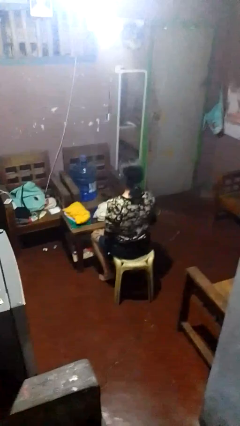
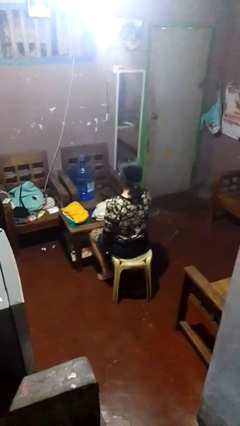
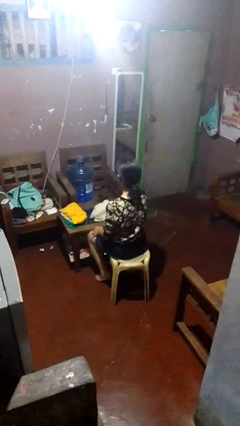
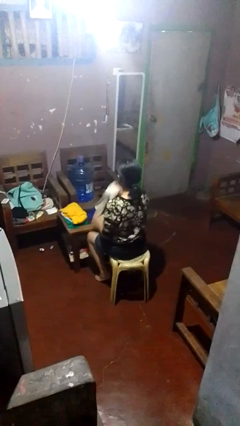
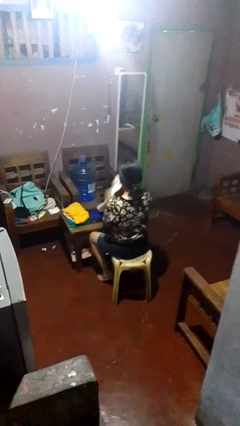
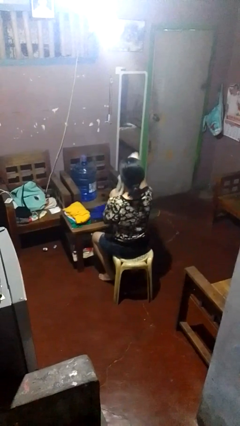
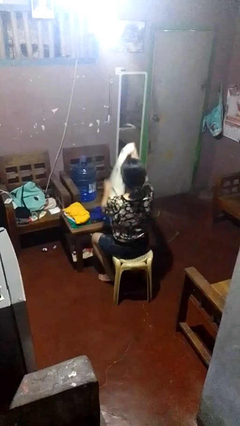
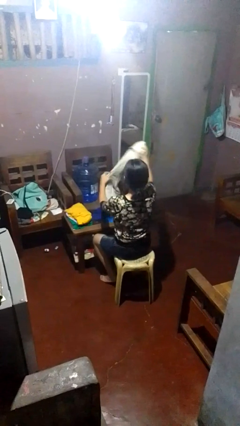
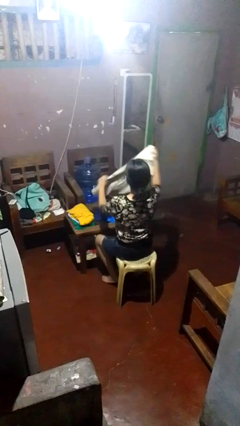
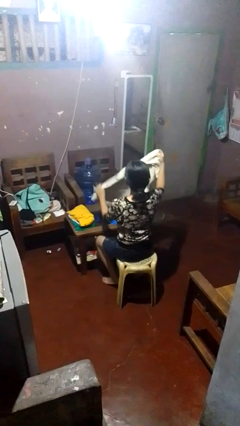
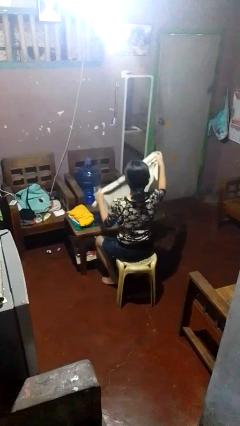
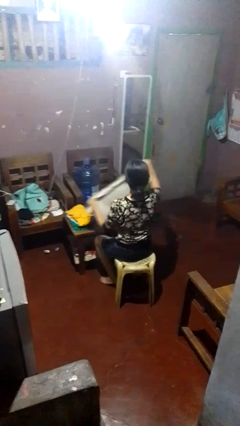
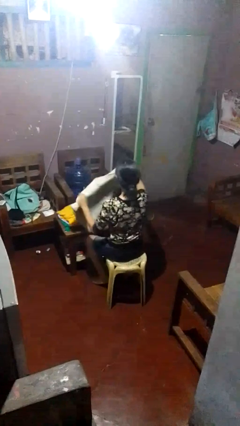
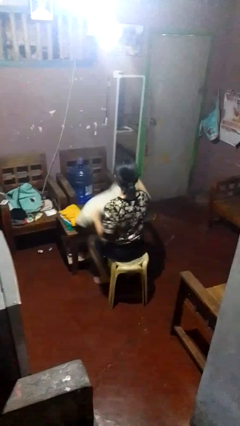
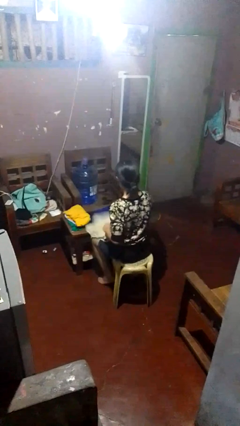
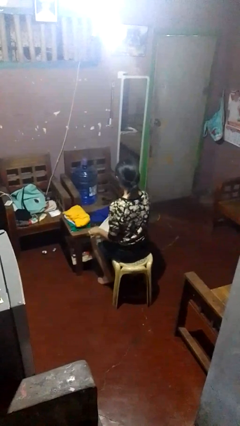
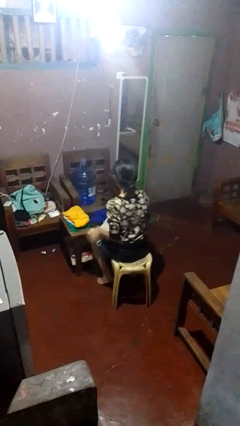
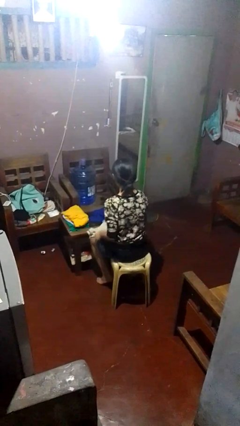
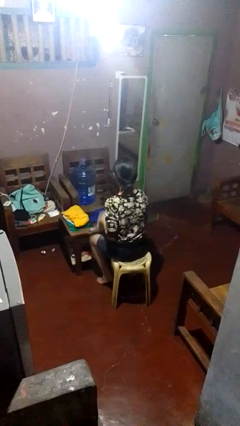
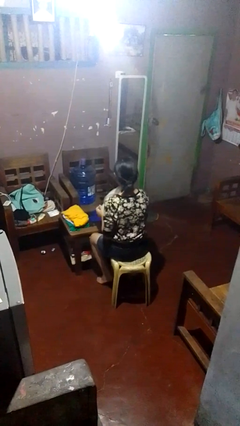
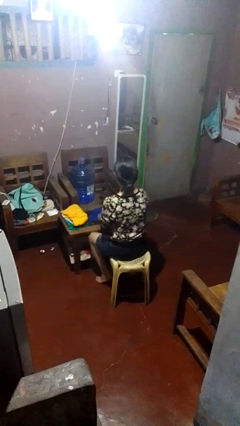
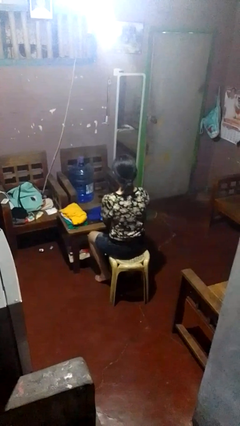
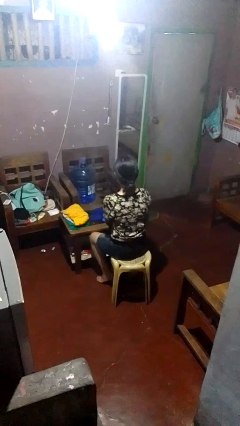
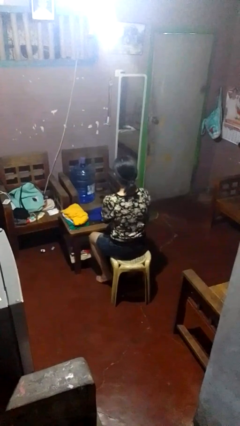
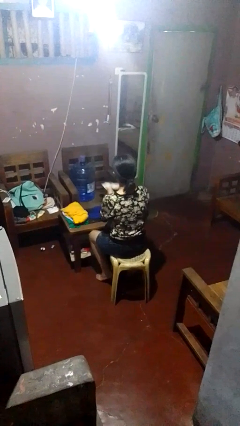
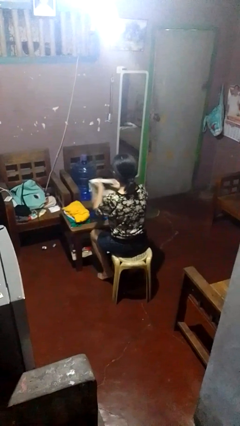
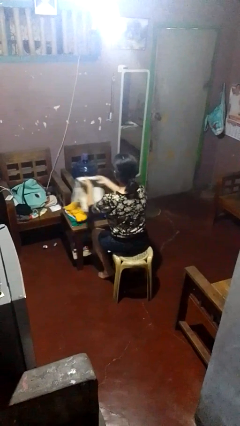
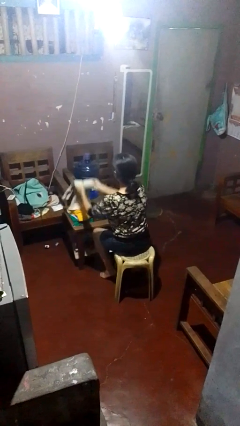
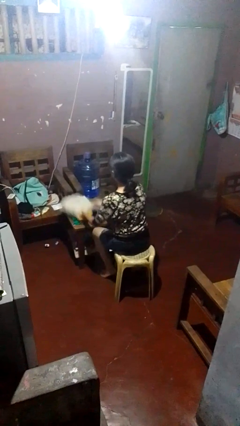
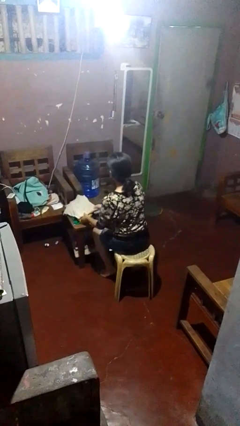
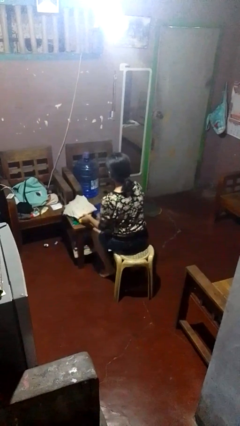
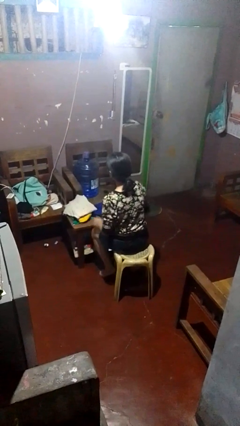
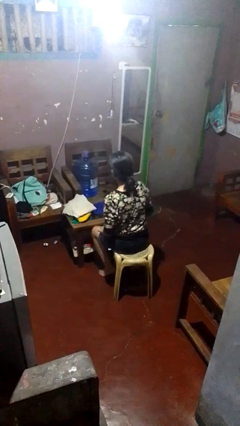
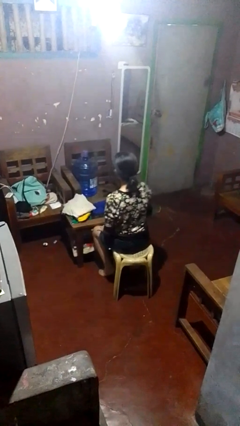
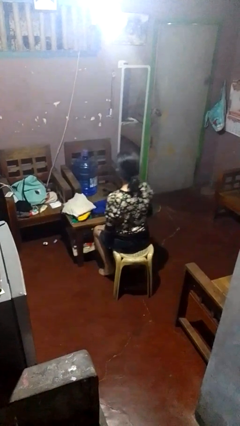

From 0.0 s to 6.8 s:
person folds shirt

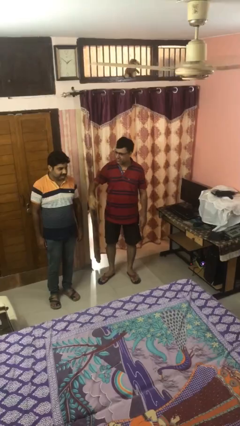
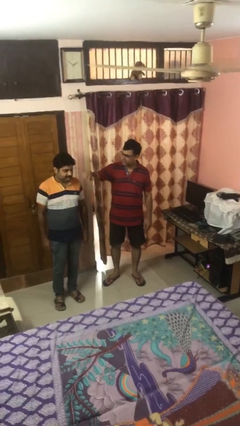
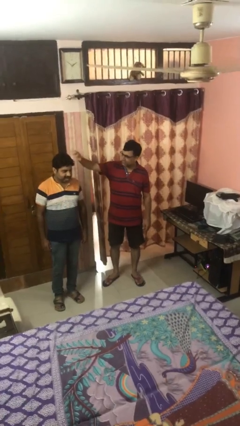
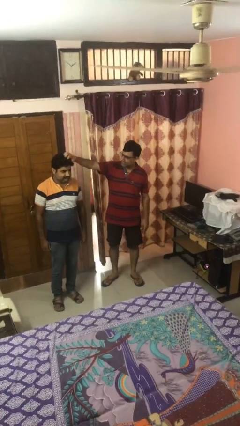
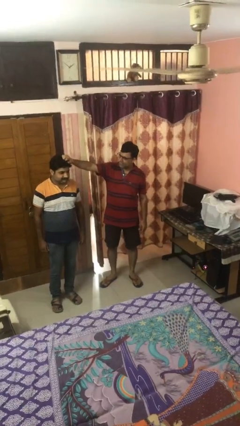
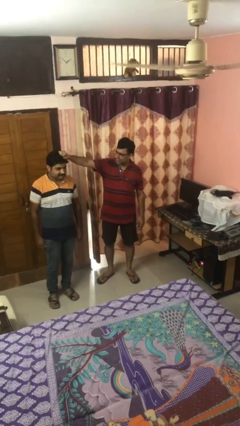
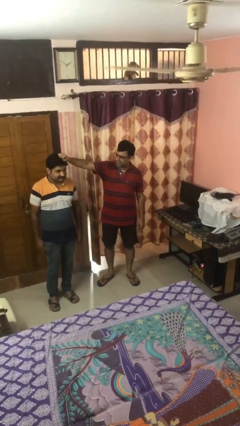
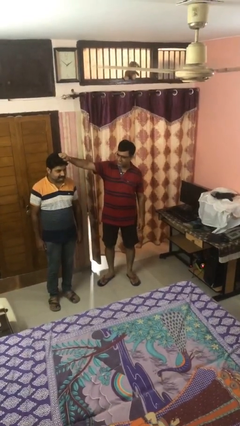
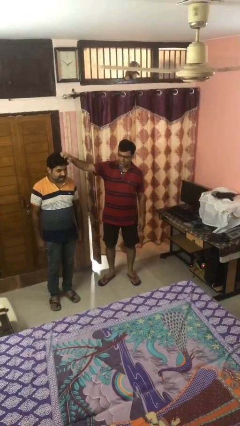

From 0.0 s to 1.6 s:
person grabs person by hair

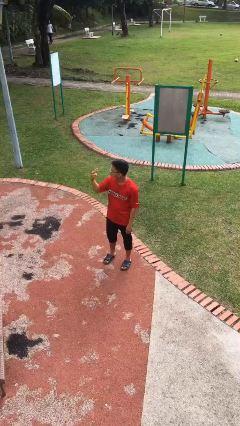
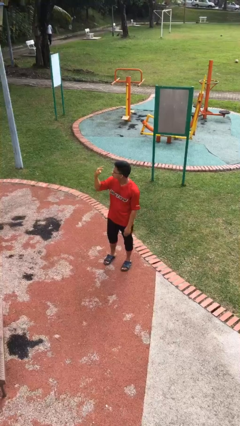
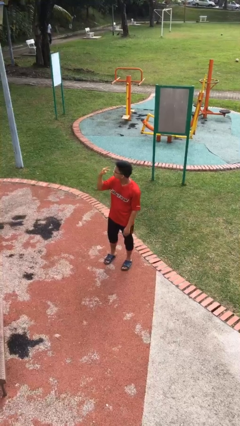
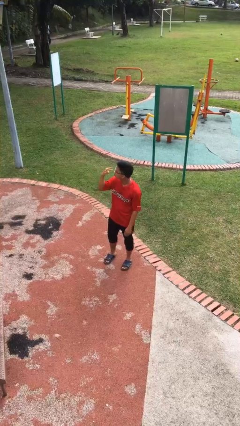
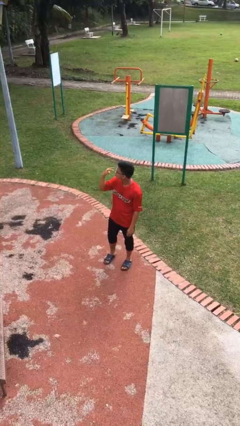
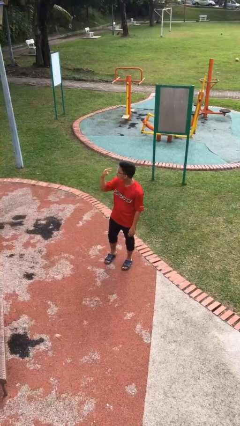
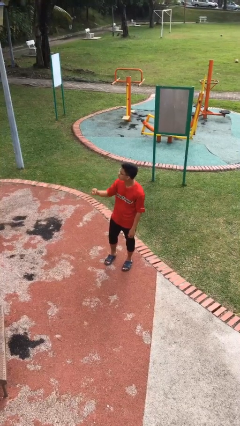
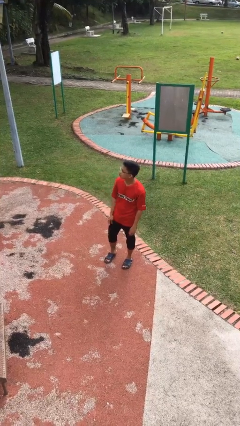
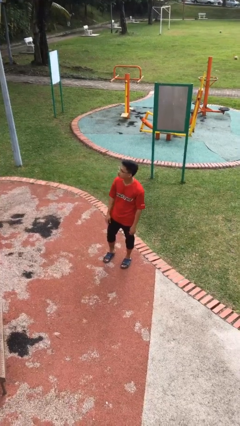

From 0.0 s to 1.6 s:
person gestures watch closely

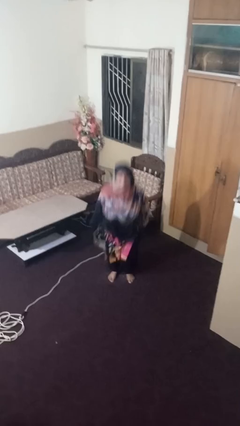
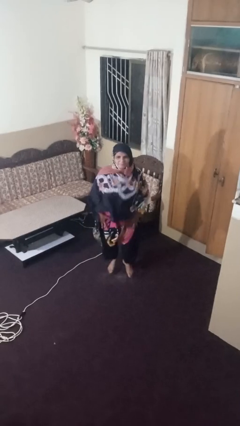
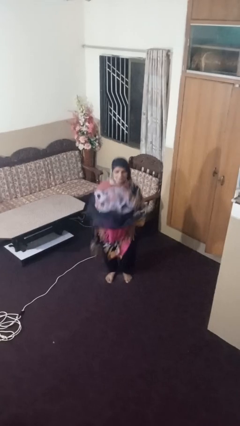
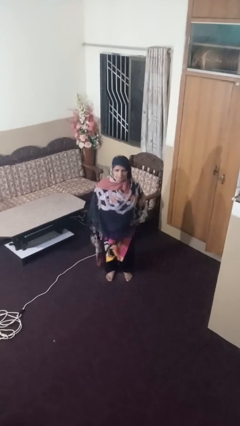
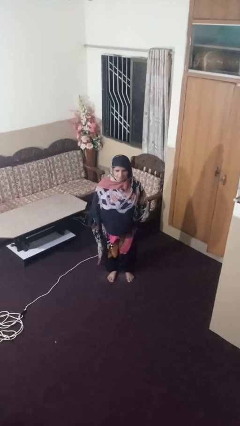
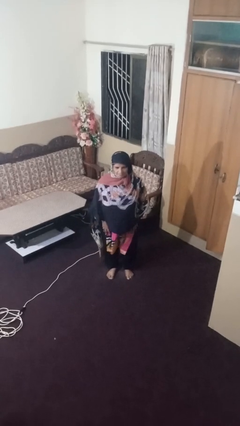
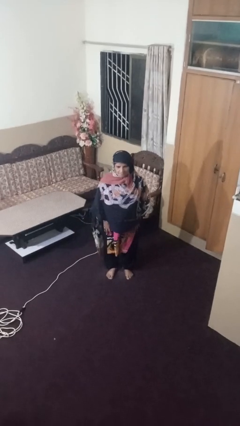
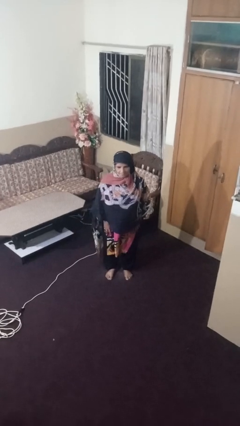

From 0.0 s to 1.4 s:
person jumps

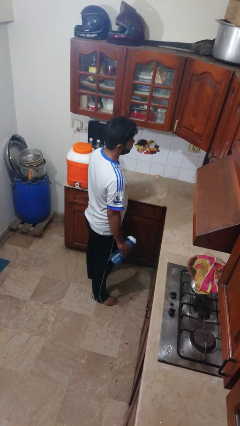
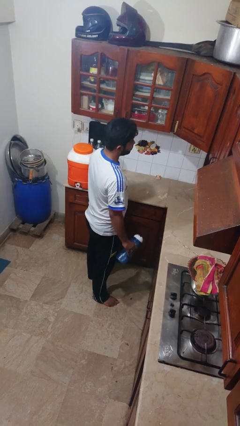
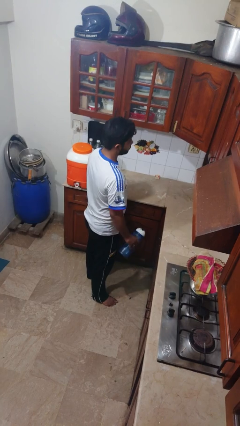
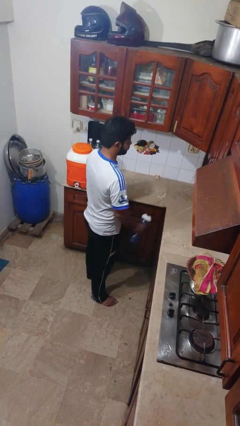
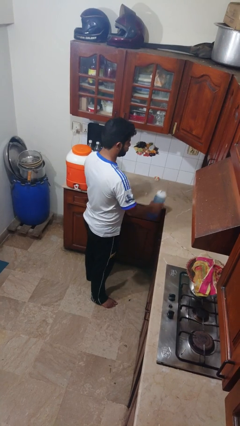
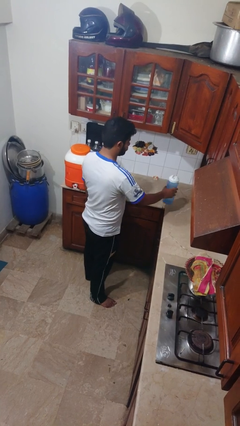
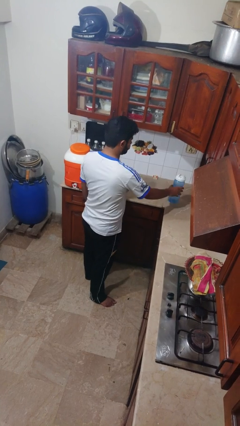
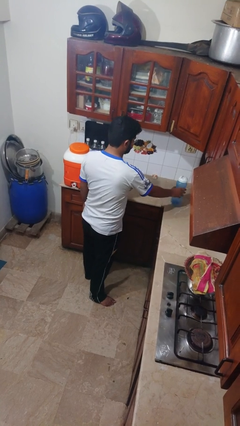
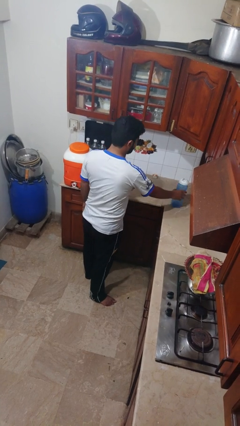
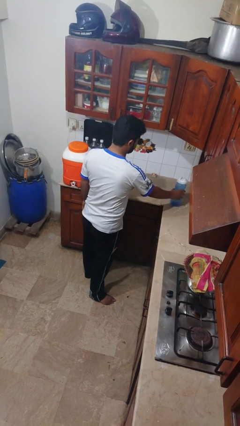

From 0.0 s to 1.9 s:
person puts down object on countertop

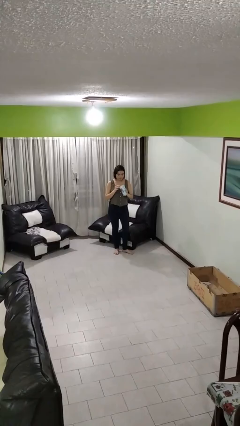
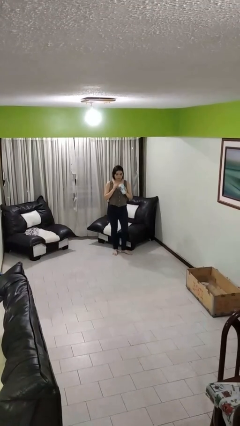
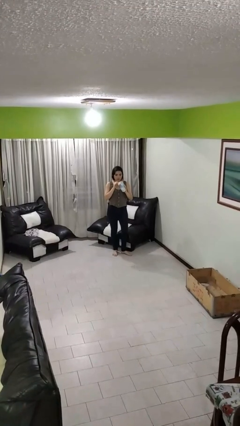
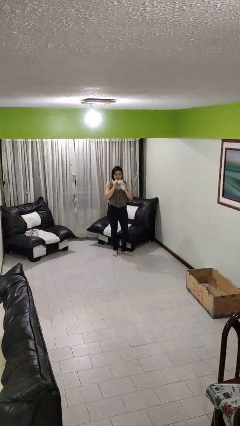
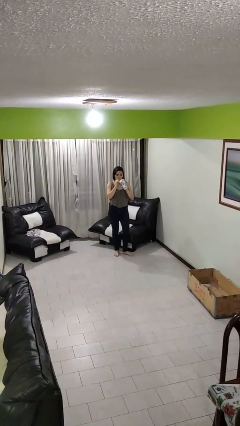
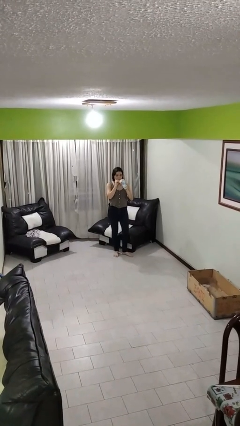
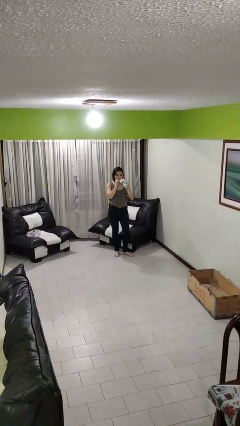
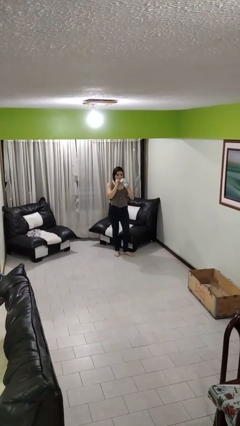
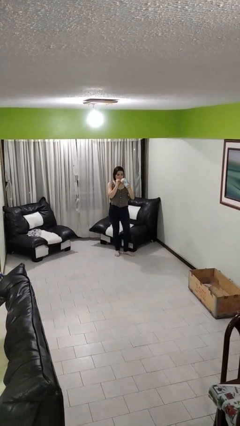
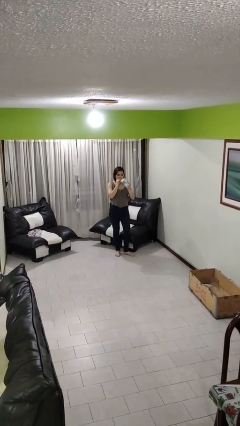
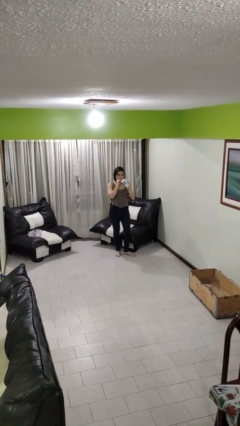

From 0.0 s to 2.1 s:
person drinks from straw

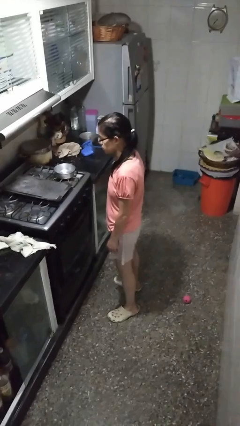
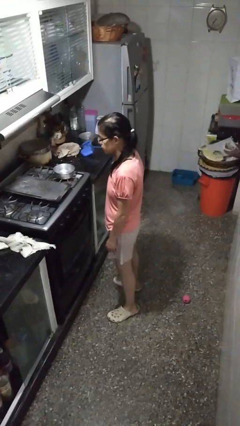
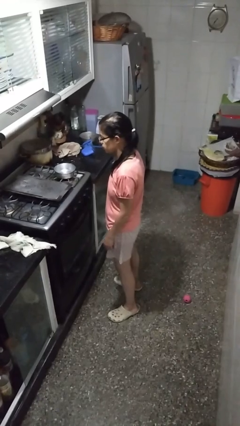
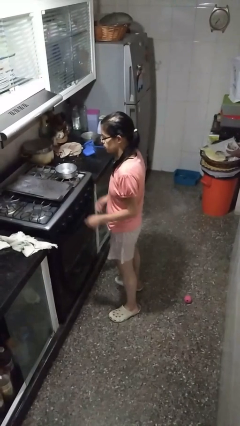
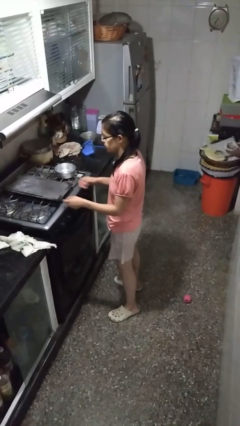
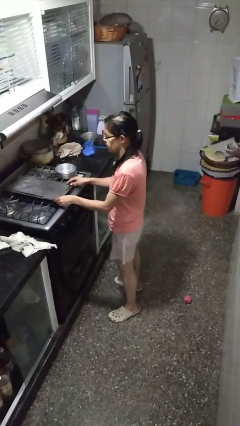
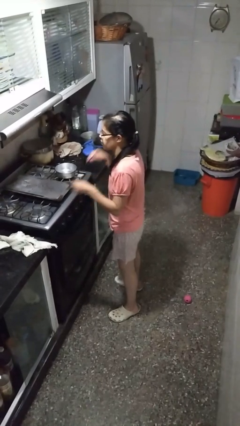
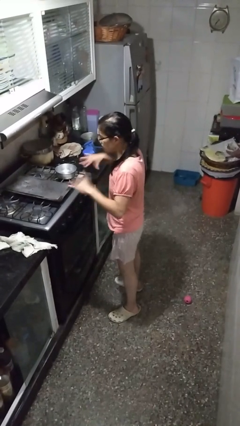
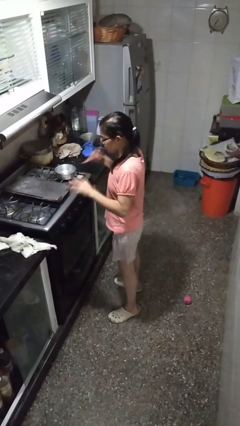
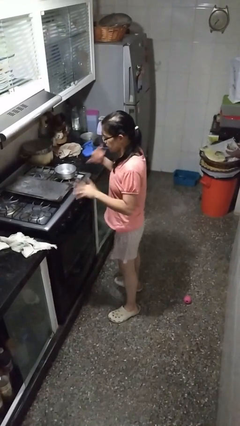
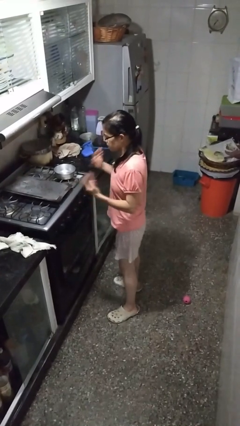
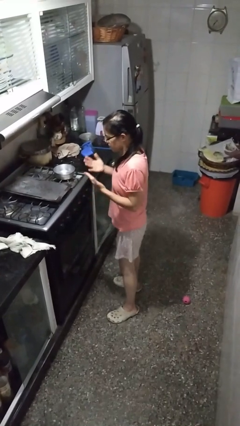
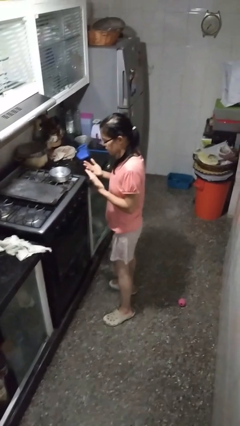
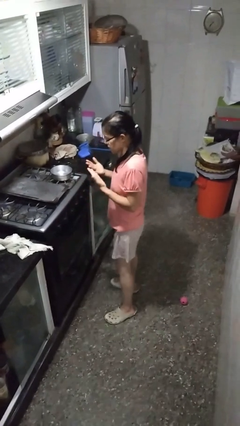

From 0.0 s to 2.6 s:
person burns hand
